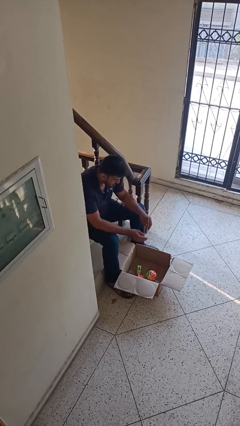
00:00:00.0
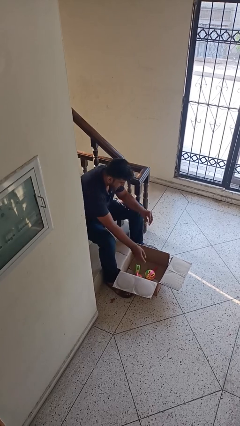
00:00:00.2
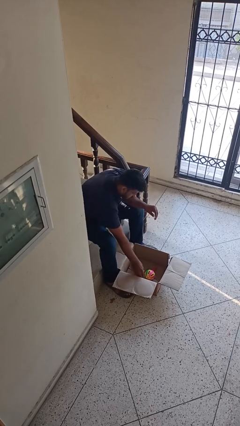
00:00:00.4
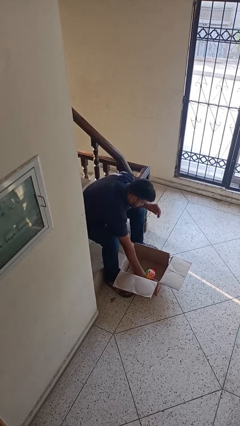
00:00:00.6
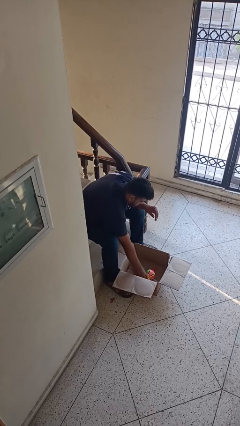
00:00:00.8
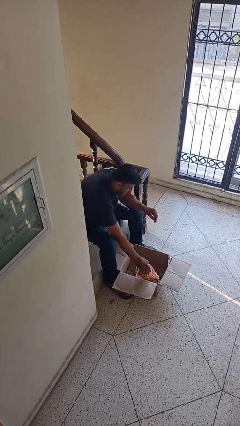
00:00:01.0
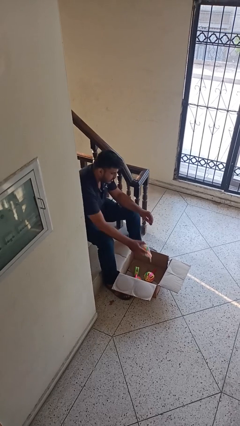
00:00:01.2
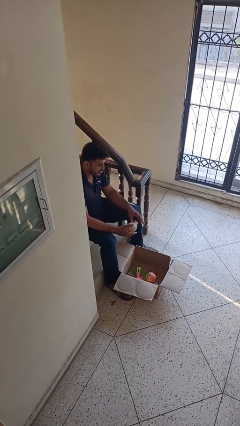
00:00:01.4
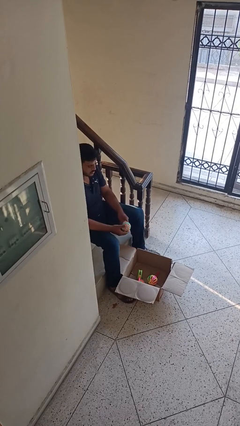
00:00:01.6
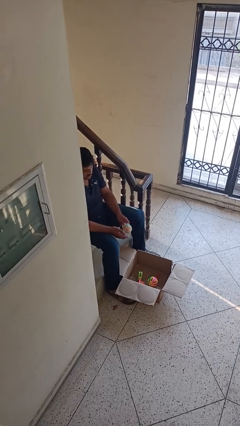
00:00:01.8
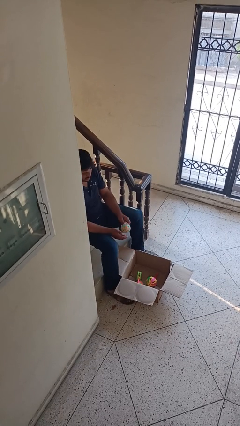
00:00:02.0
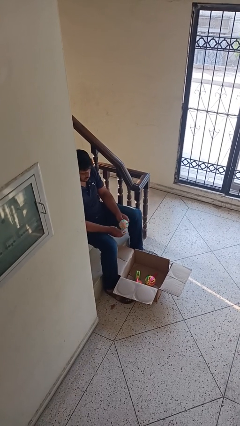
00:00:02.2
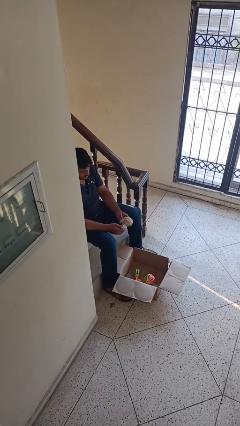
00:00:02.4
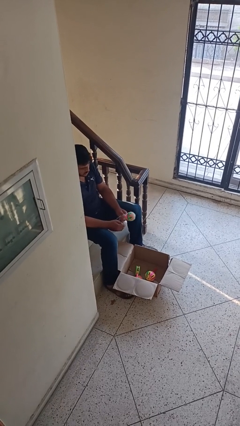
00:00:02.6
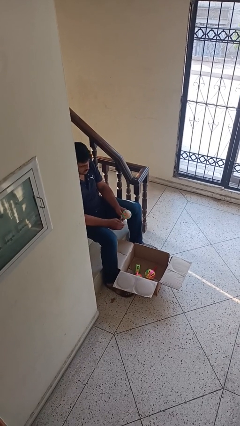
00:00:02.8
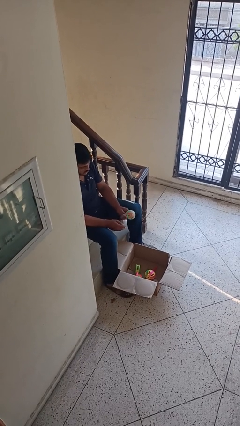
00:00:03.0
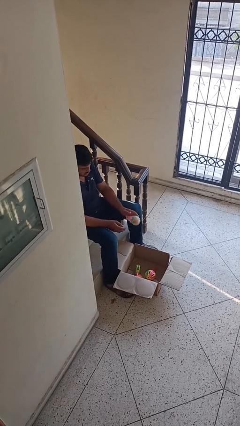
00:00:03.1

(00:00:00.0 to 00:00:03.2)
person takes object from box

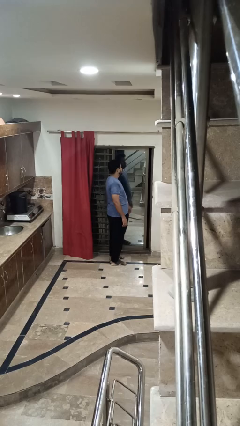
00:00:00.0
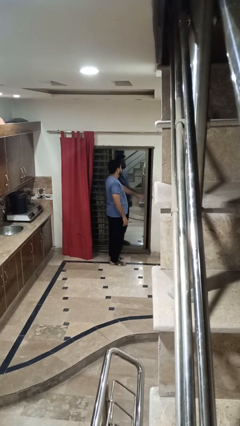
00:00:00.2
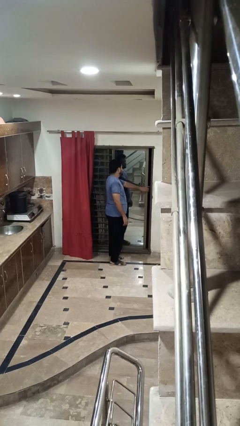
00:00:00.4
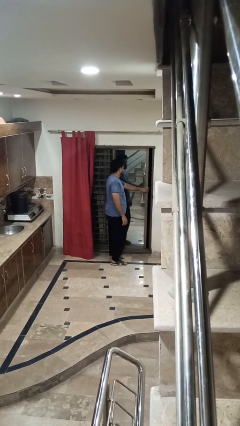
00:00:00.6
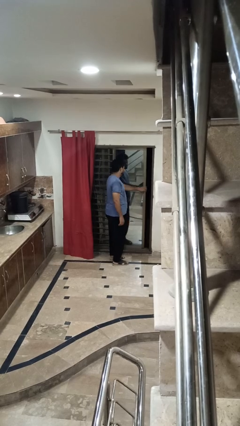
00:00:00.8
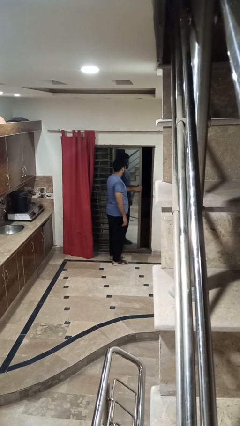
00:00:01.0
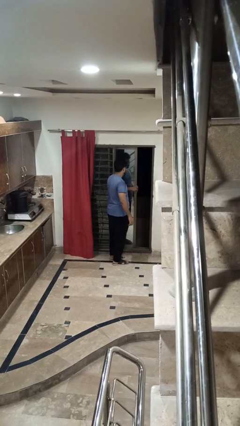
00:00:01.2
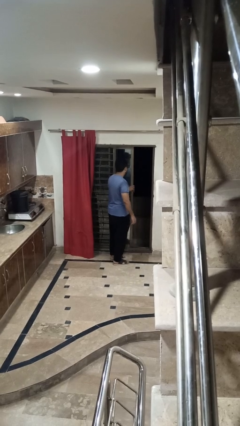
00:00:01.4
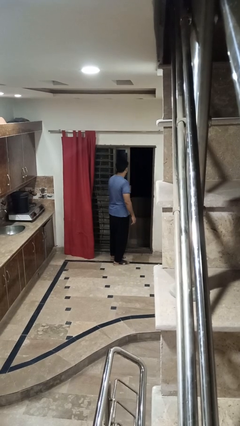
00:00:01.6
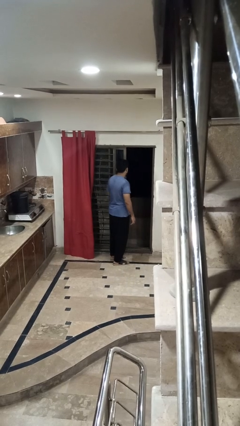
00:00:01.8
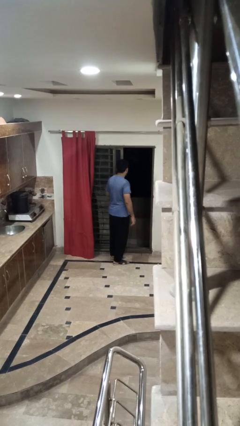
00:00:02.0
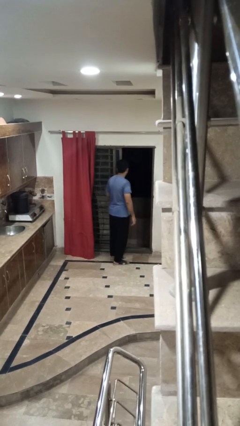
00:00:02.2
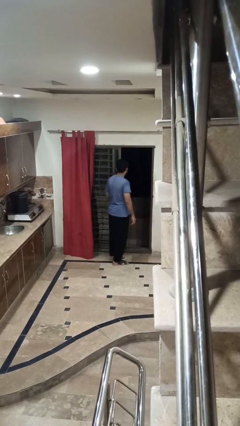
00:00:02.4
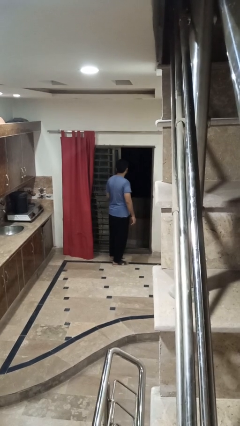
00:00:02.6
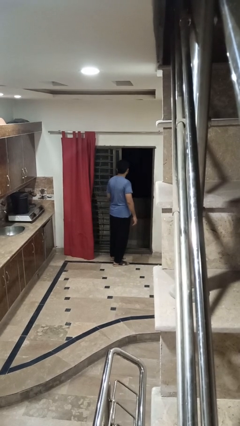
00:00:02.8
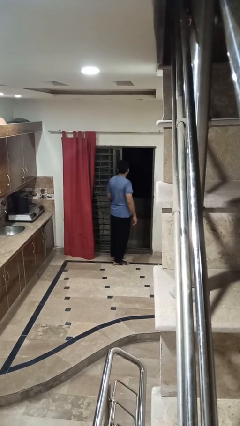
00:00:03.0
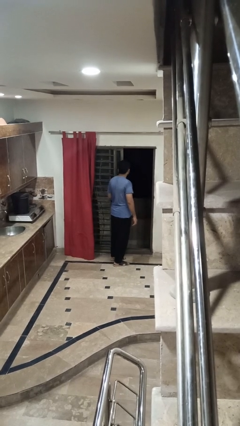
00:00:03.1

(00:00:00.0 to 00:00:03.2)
person opens sliding door

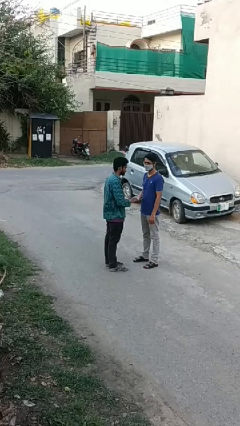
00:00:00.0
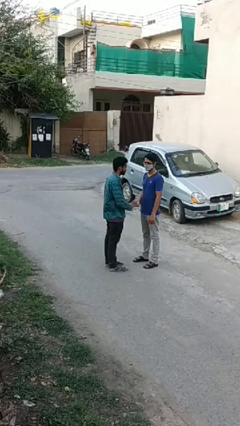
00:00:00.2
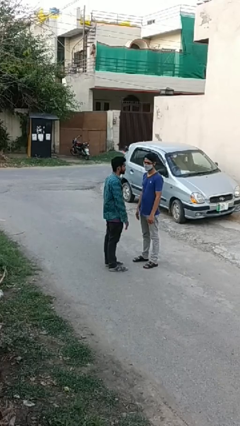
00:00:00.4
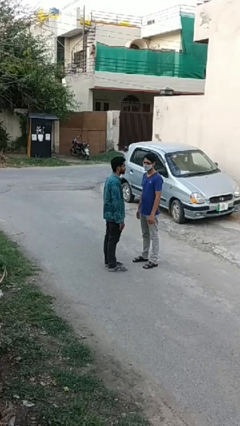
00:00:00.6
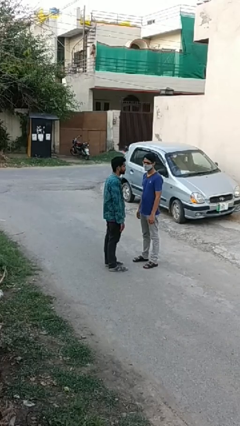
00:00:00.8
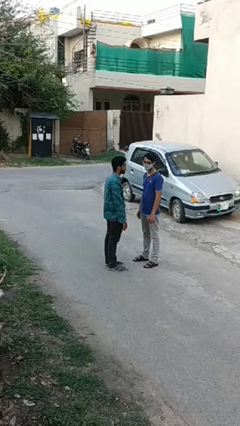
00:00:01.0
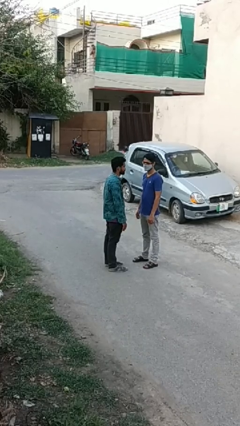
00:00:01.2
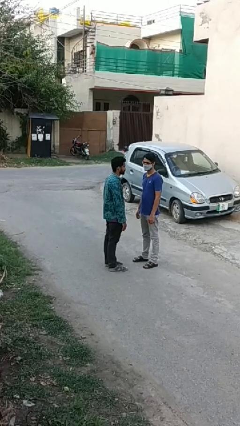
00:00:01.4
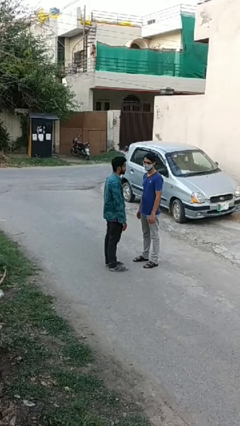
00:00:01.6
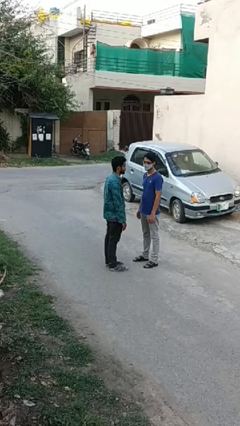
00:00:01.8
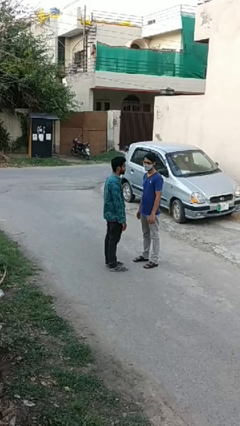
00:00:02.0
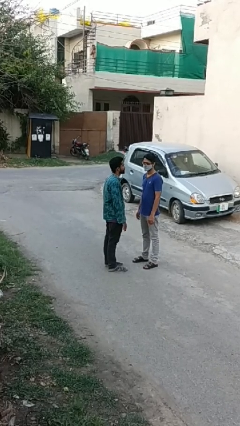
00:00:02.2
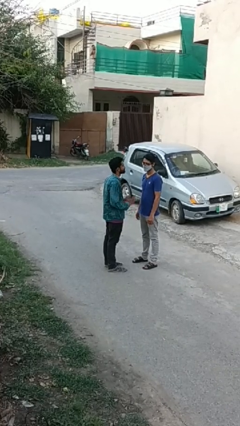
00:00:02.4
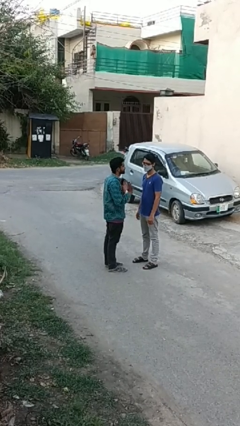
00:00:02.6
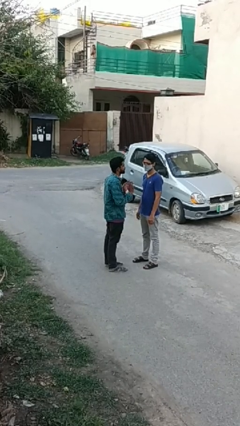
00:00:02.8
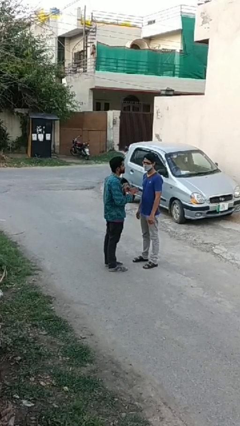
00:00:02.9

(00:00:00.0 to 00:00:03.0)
person highfives hand

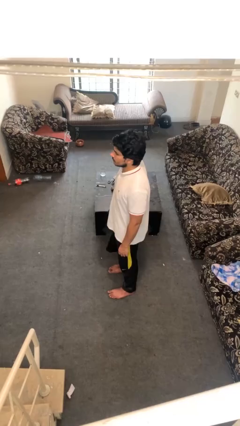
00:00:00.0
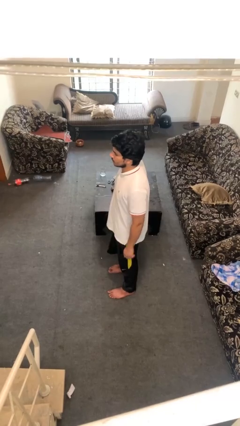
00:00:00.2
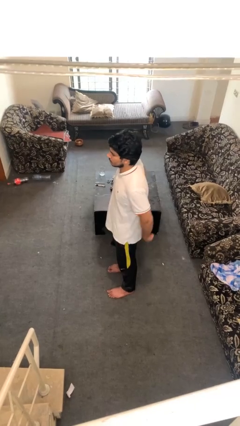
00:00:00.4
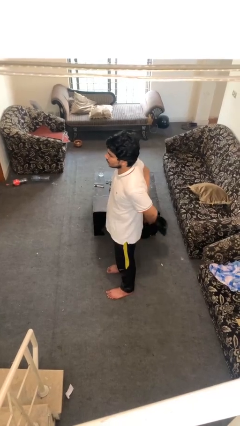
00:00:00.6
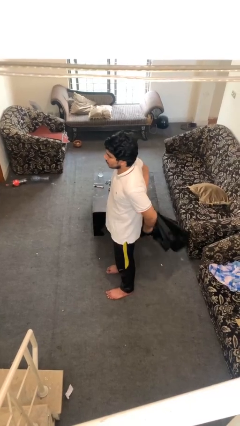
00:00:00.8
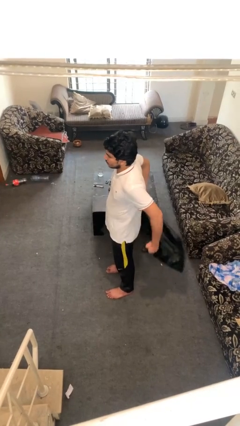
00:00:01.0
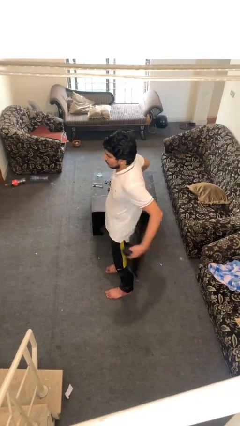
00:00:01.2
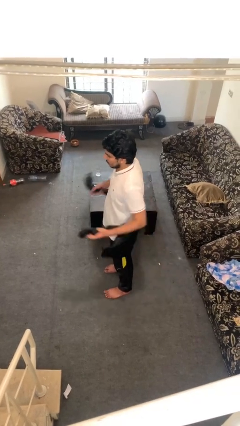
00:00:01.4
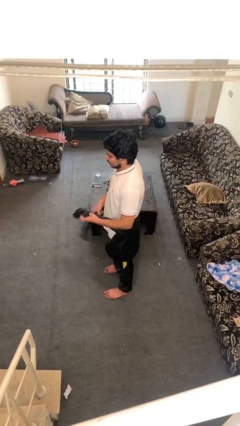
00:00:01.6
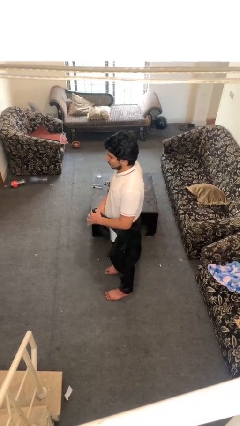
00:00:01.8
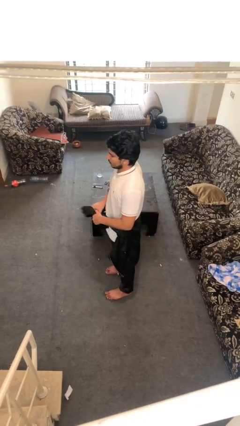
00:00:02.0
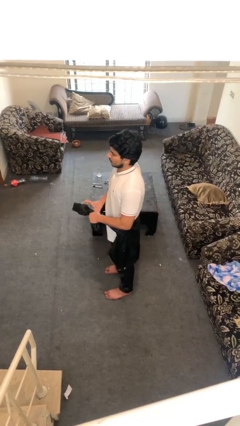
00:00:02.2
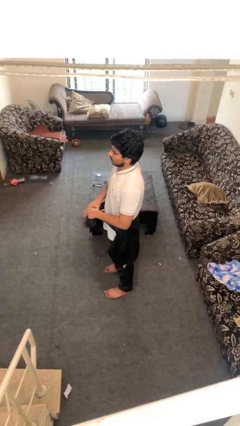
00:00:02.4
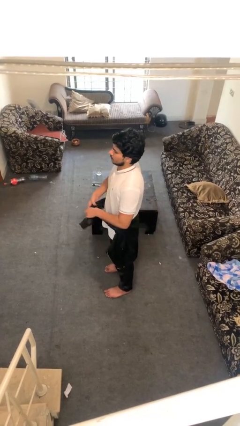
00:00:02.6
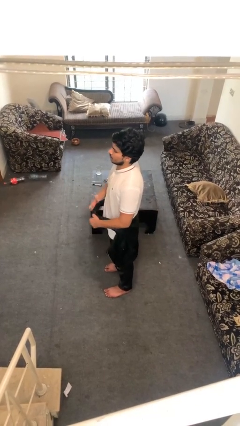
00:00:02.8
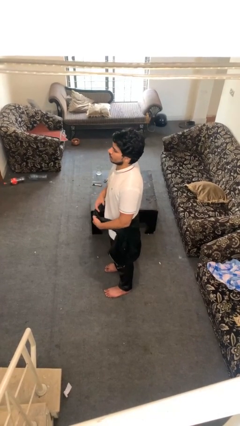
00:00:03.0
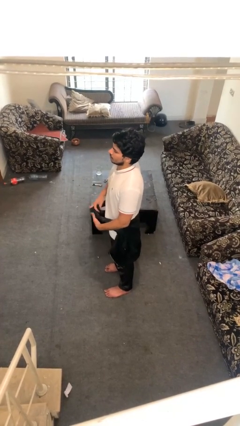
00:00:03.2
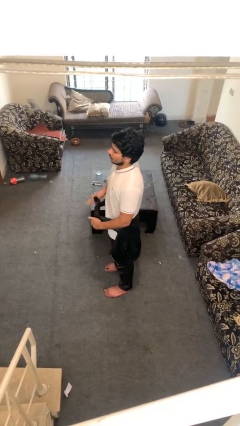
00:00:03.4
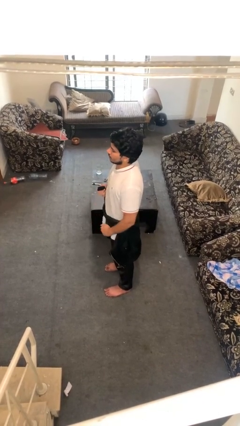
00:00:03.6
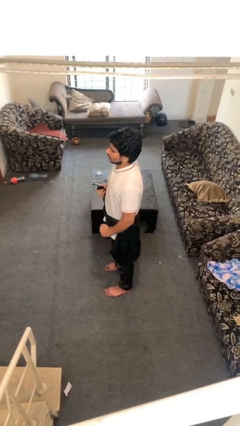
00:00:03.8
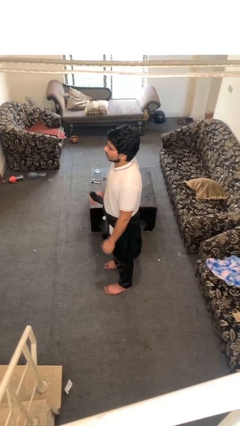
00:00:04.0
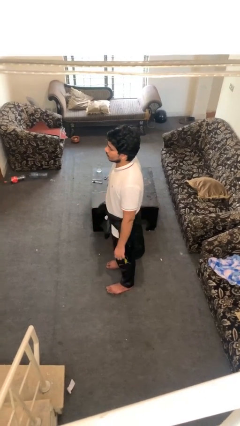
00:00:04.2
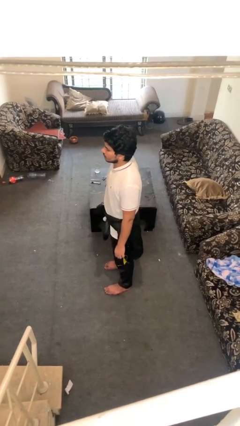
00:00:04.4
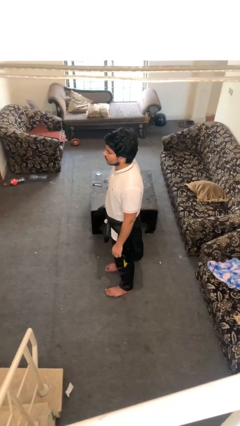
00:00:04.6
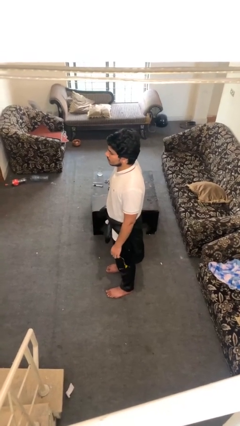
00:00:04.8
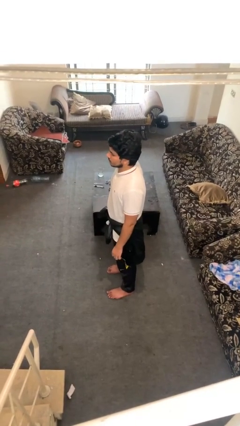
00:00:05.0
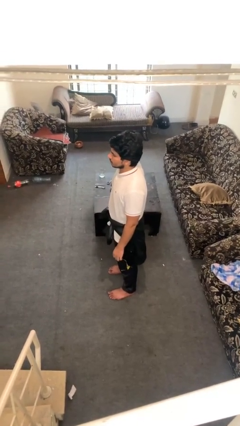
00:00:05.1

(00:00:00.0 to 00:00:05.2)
person ties jacket around waist

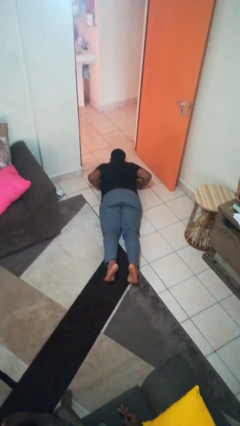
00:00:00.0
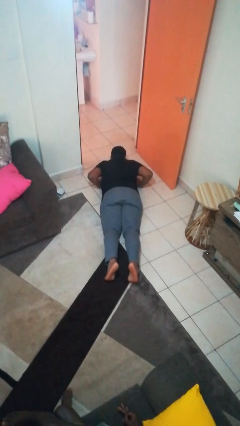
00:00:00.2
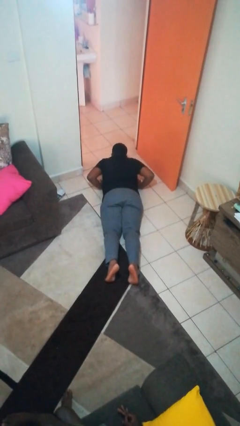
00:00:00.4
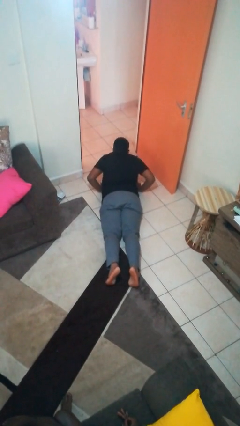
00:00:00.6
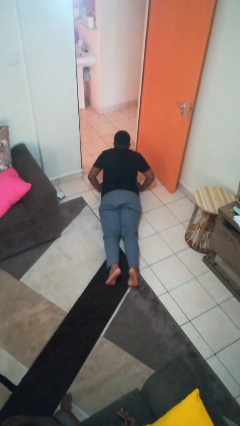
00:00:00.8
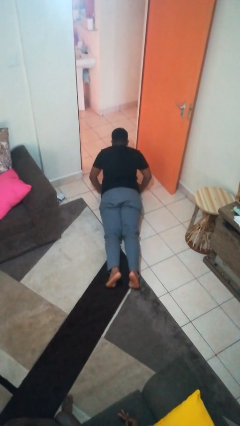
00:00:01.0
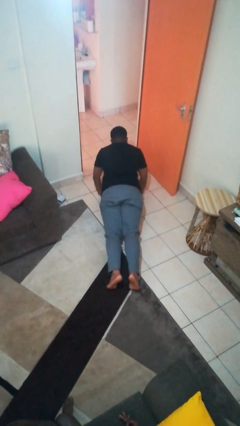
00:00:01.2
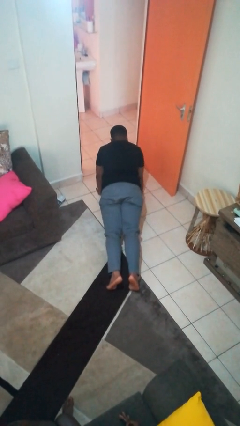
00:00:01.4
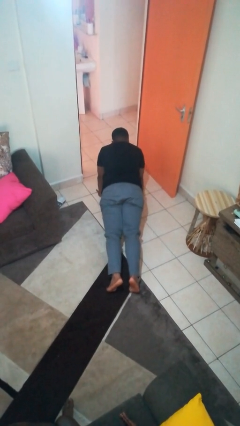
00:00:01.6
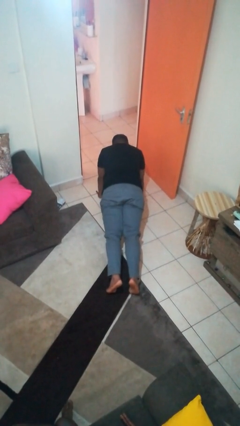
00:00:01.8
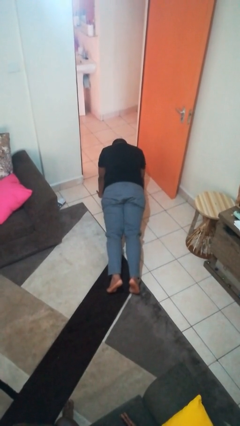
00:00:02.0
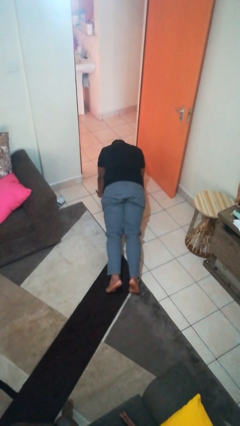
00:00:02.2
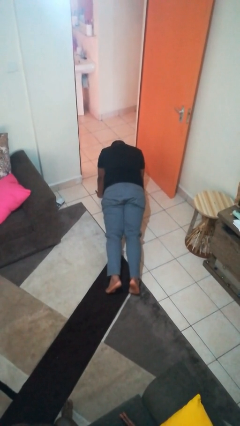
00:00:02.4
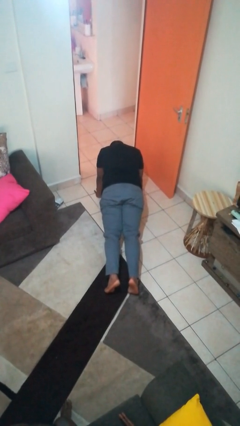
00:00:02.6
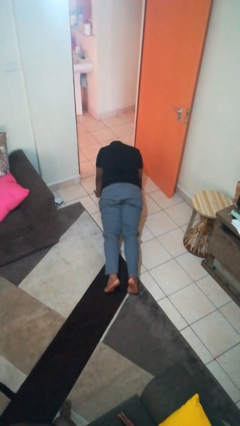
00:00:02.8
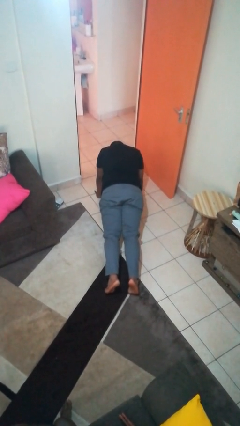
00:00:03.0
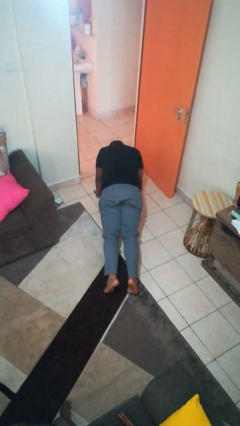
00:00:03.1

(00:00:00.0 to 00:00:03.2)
person exercises with pushup
